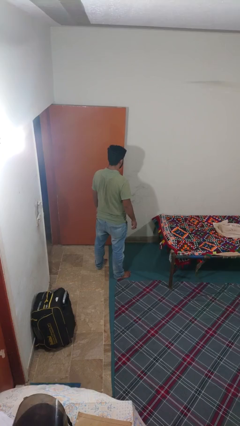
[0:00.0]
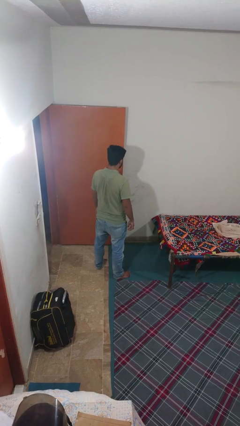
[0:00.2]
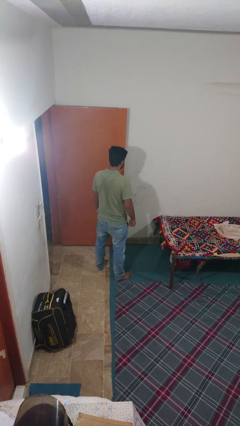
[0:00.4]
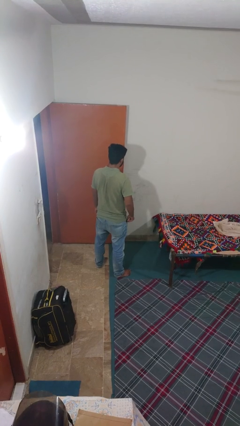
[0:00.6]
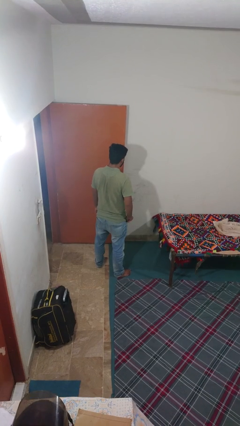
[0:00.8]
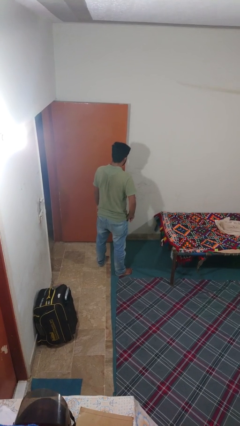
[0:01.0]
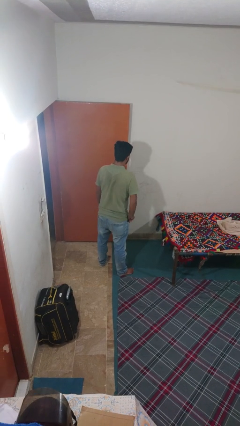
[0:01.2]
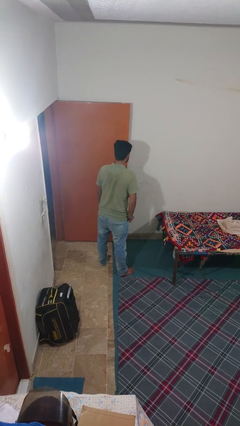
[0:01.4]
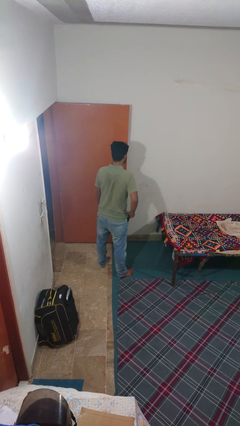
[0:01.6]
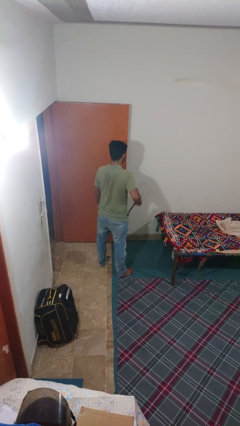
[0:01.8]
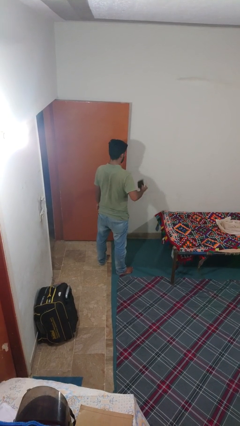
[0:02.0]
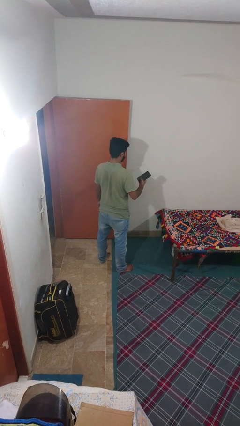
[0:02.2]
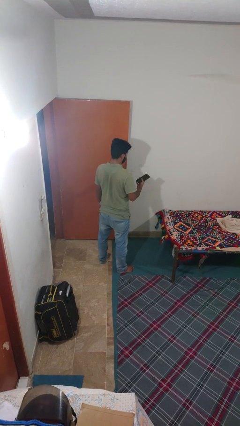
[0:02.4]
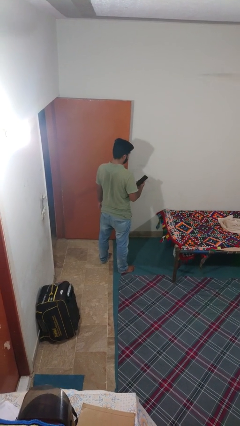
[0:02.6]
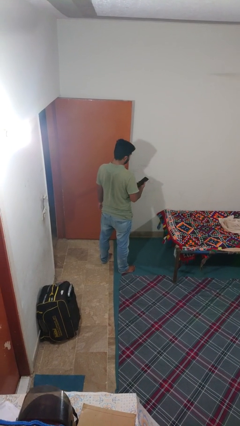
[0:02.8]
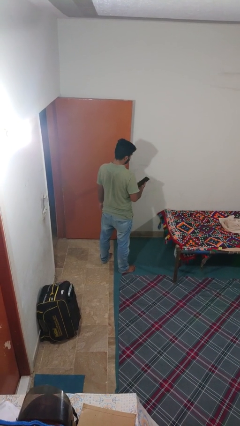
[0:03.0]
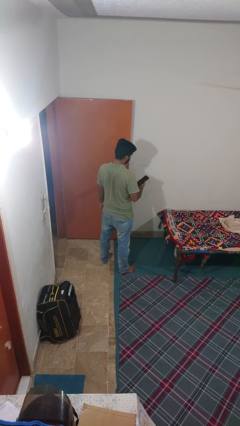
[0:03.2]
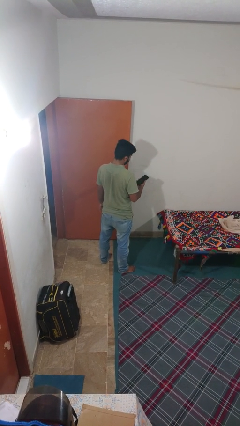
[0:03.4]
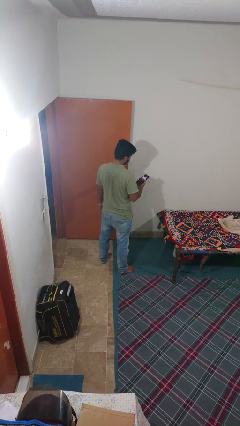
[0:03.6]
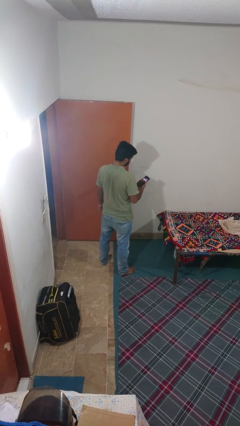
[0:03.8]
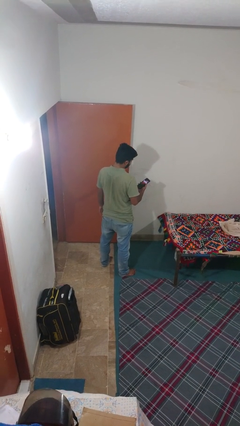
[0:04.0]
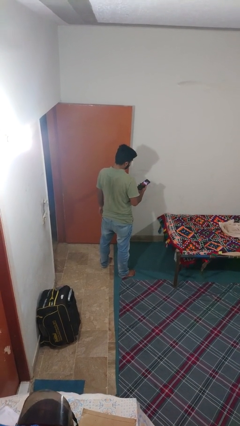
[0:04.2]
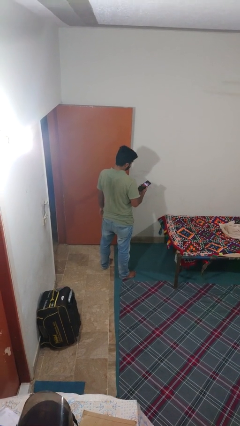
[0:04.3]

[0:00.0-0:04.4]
person takes phone from pocket

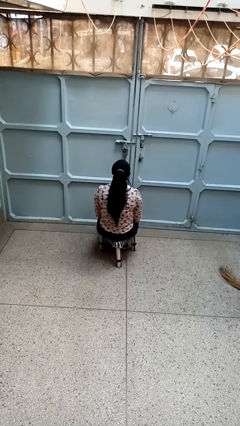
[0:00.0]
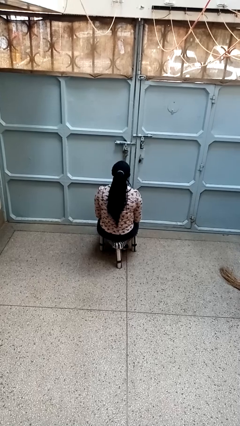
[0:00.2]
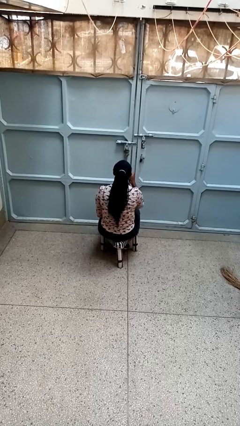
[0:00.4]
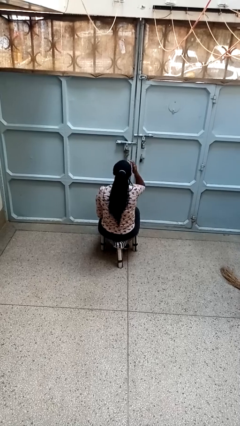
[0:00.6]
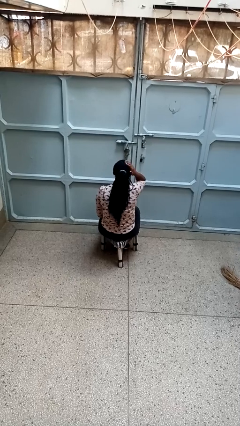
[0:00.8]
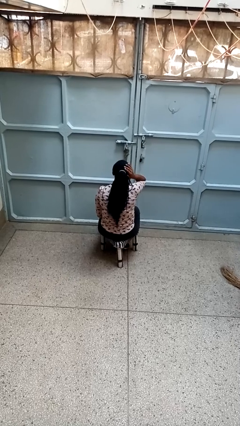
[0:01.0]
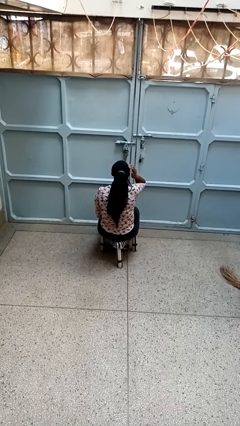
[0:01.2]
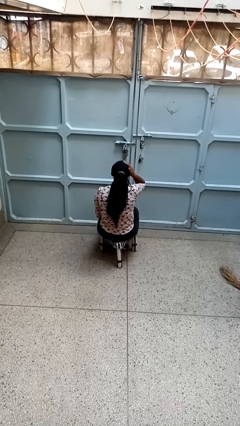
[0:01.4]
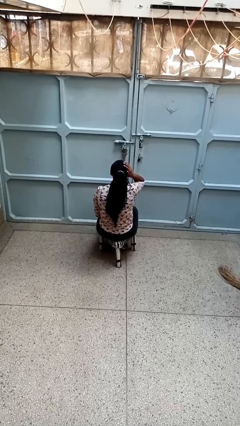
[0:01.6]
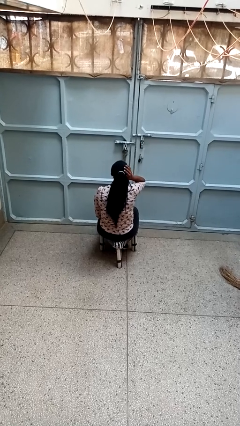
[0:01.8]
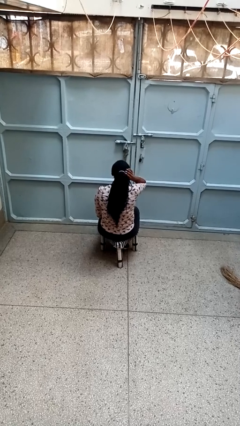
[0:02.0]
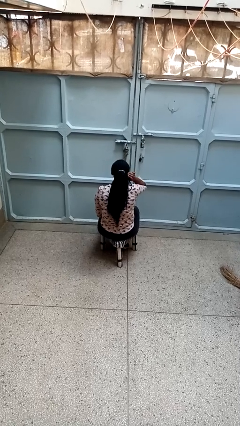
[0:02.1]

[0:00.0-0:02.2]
person strokes hair

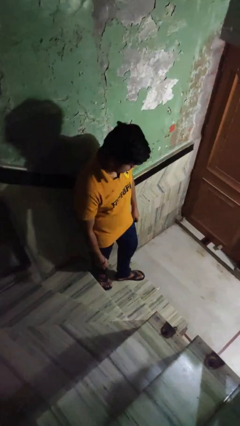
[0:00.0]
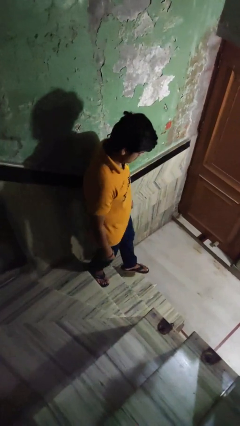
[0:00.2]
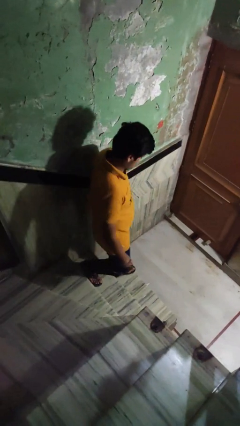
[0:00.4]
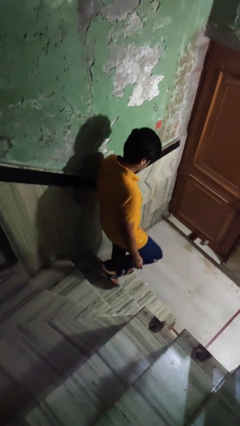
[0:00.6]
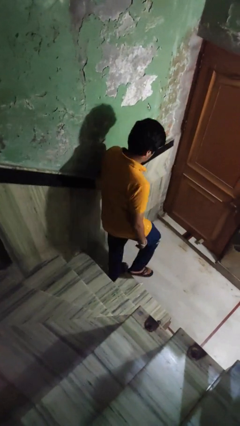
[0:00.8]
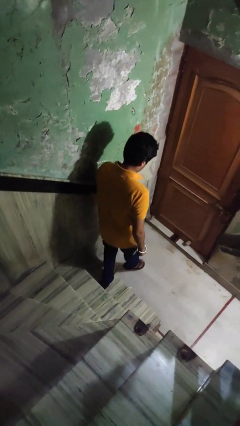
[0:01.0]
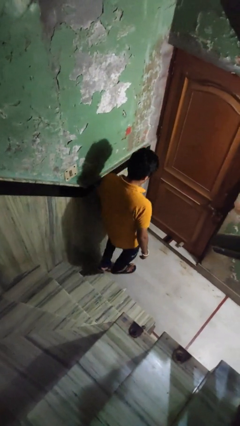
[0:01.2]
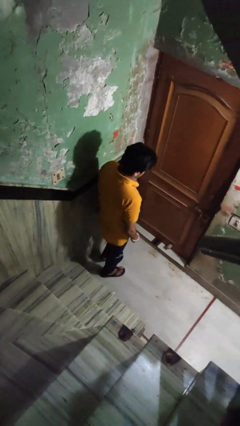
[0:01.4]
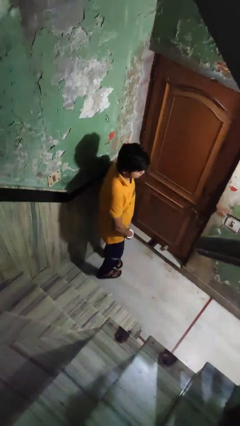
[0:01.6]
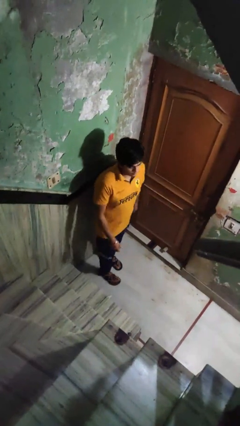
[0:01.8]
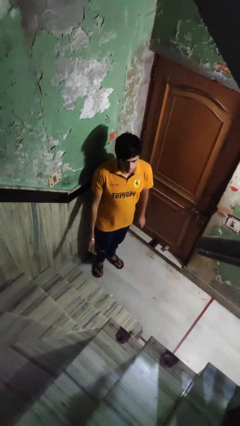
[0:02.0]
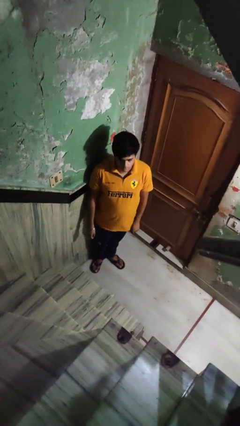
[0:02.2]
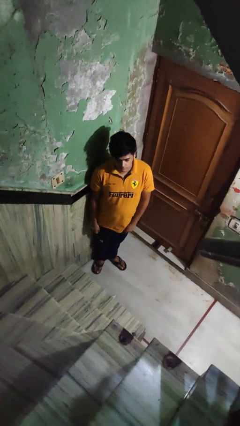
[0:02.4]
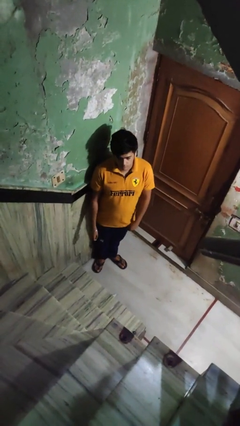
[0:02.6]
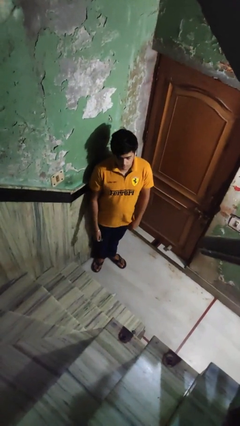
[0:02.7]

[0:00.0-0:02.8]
person climbs down stairs

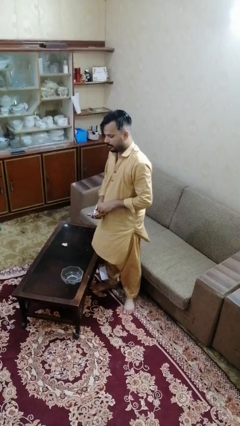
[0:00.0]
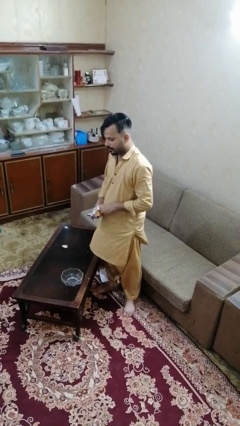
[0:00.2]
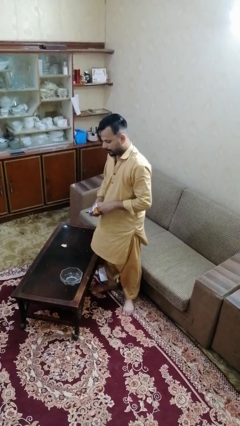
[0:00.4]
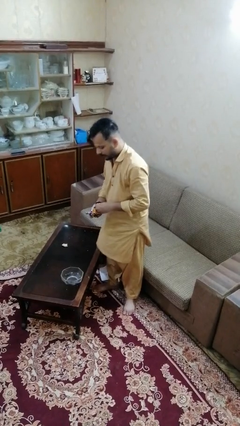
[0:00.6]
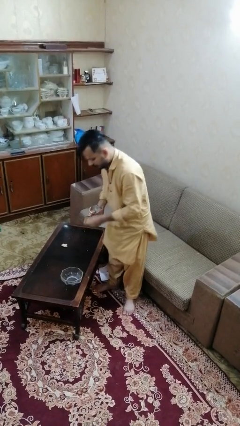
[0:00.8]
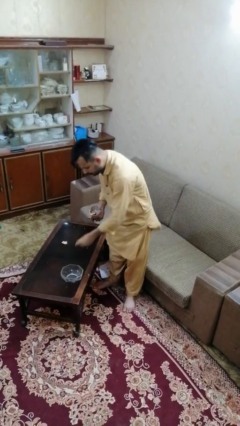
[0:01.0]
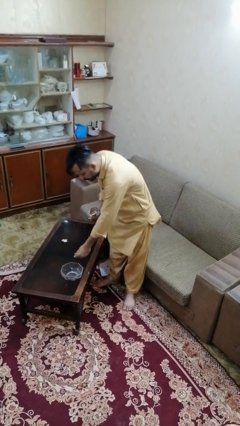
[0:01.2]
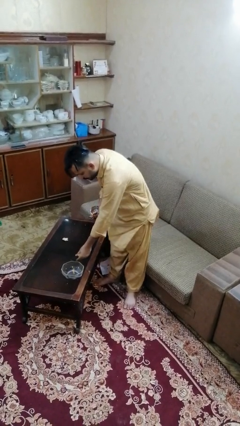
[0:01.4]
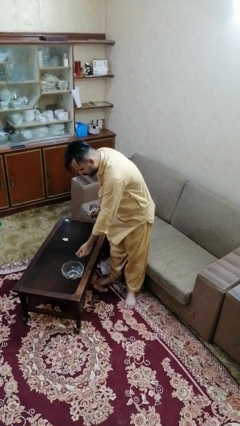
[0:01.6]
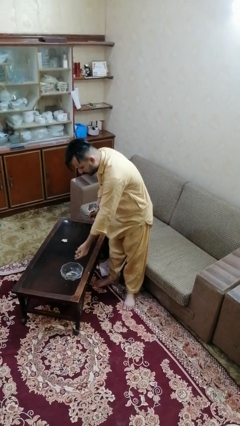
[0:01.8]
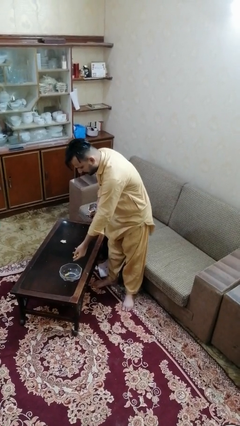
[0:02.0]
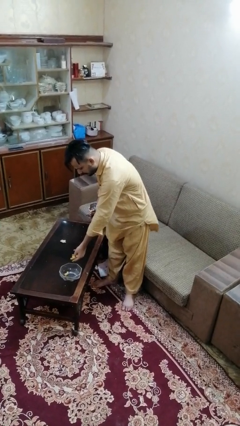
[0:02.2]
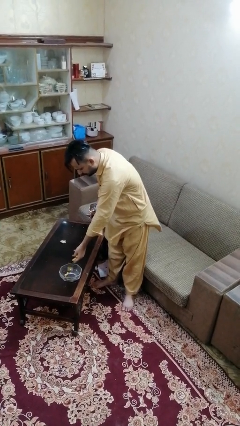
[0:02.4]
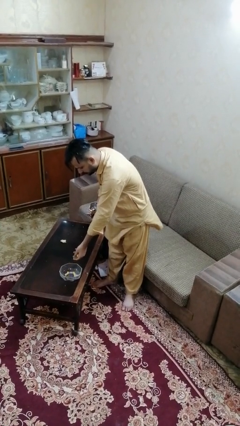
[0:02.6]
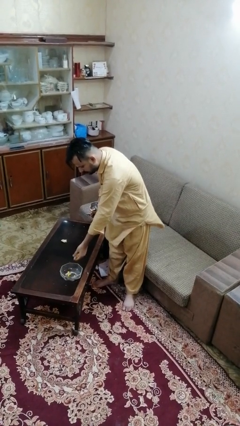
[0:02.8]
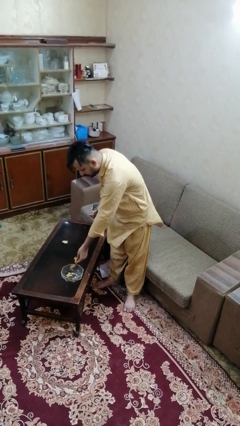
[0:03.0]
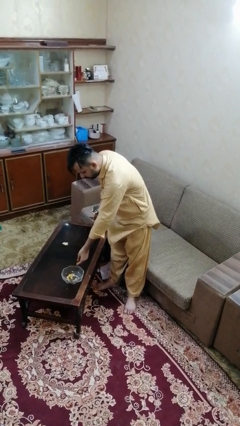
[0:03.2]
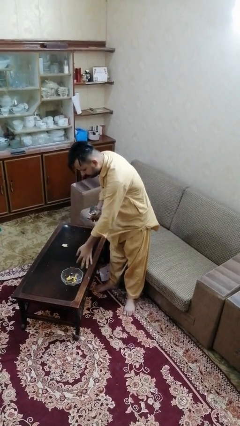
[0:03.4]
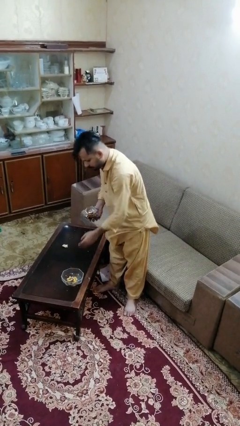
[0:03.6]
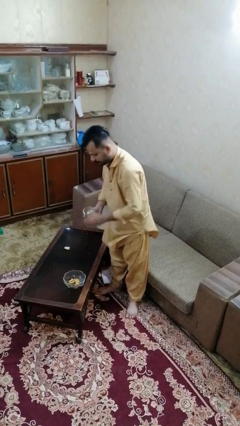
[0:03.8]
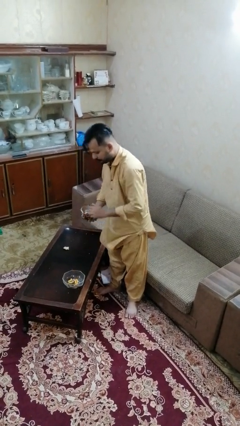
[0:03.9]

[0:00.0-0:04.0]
person pours into bowl

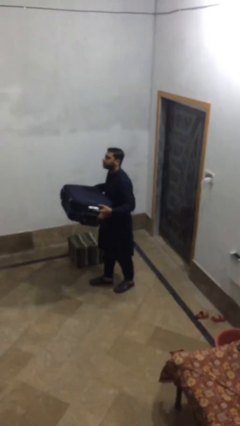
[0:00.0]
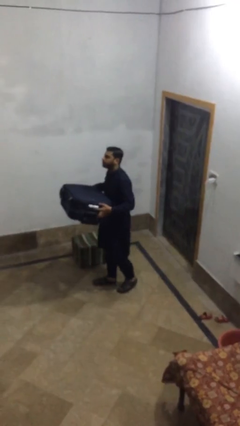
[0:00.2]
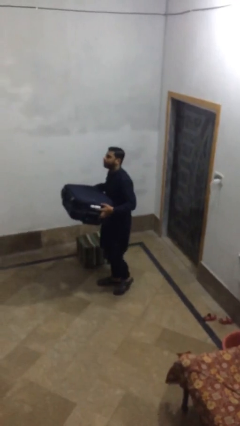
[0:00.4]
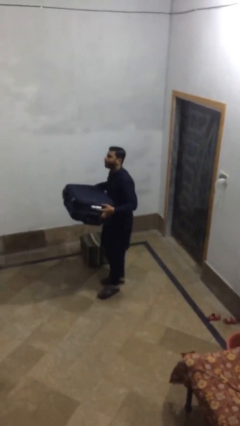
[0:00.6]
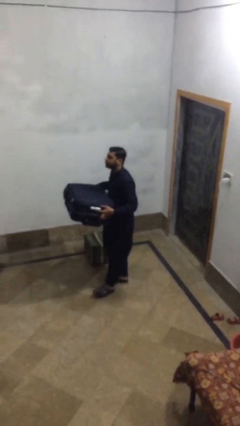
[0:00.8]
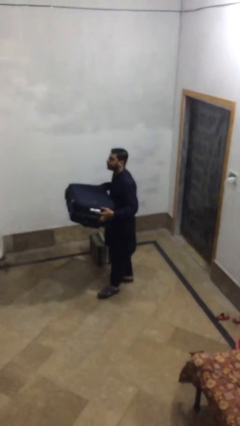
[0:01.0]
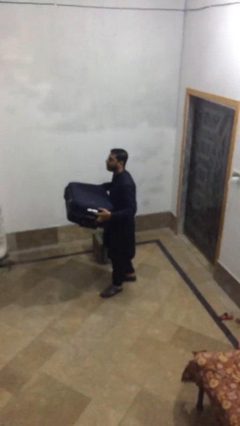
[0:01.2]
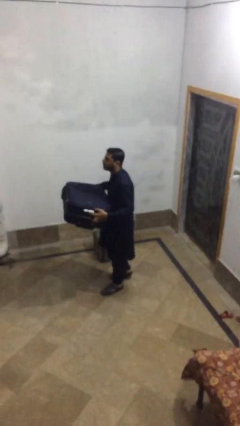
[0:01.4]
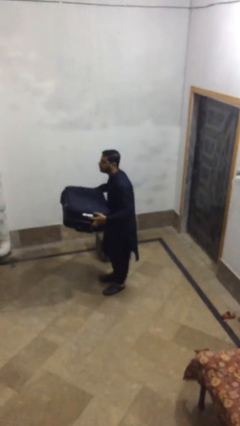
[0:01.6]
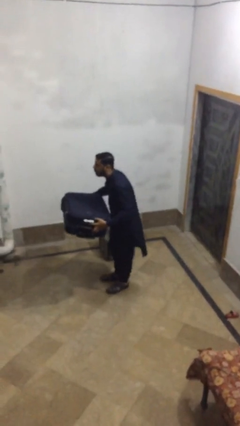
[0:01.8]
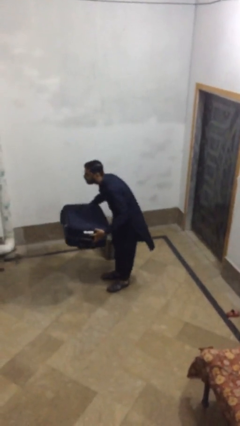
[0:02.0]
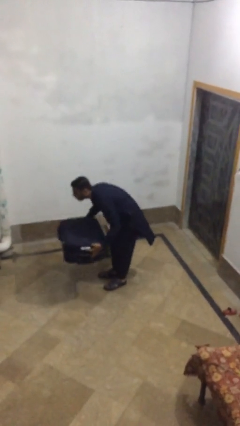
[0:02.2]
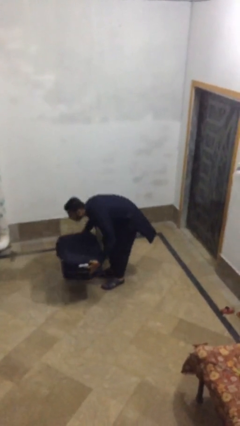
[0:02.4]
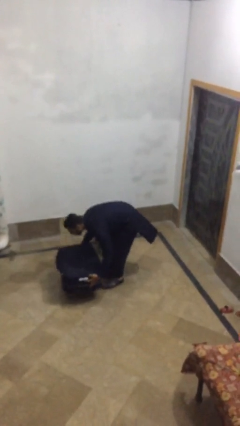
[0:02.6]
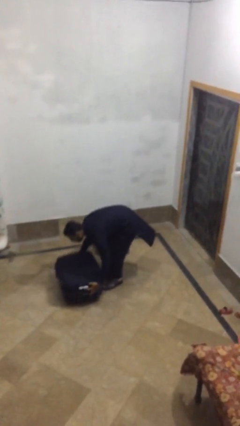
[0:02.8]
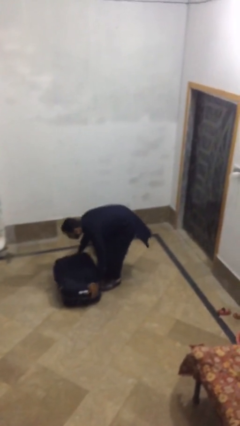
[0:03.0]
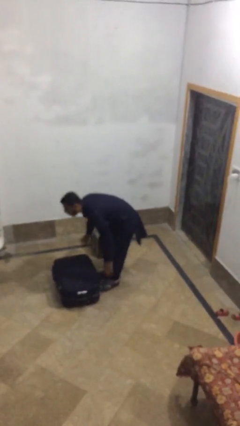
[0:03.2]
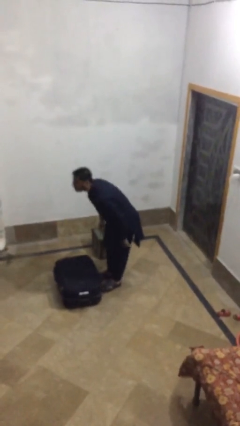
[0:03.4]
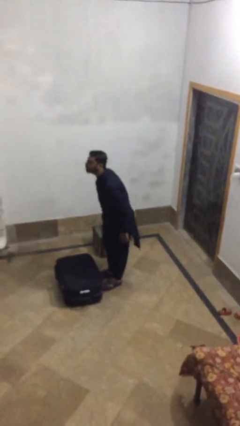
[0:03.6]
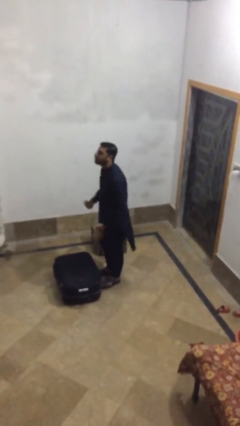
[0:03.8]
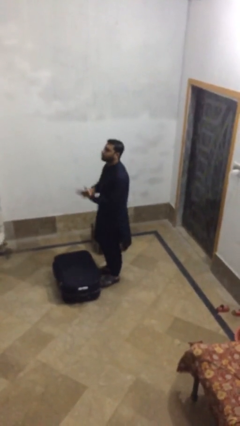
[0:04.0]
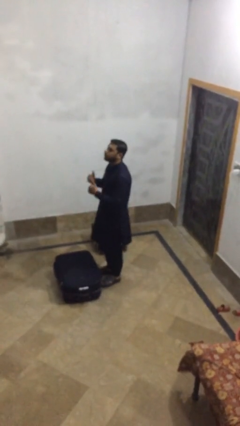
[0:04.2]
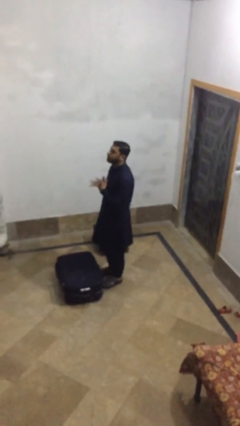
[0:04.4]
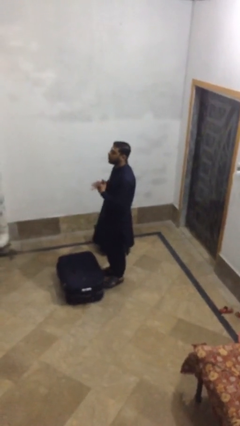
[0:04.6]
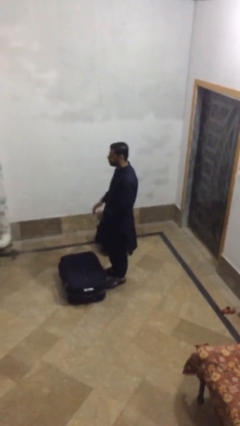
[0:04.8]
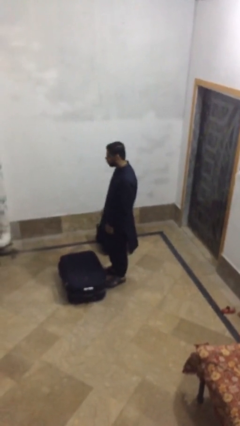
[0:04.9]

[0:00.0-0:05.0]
person puts down object on floor
